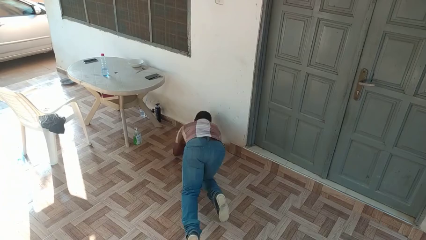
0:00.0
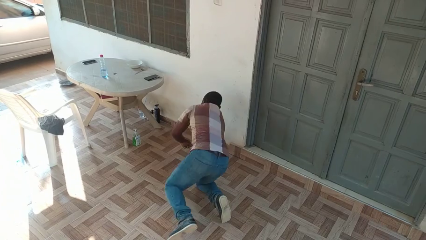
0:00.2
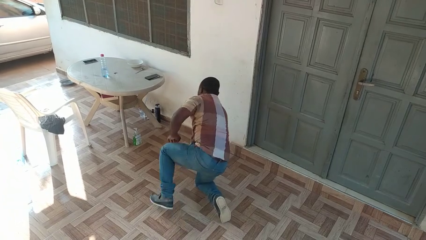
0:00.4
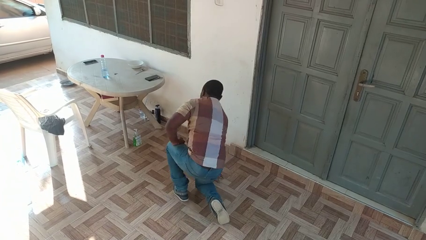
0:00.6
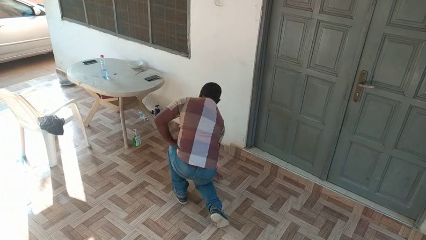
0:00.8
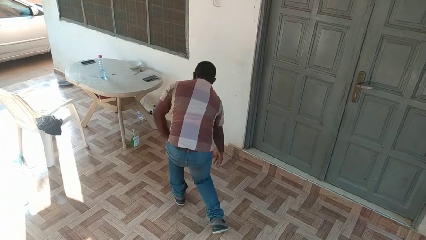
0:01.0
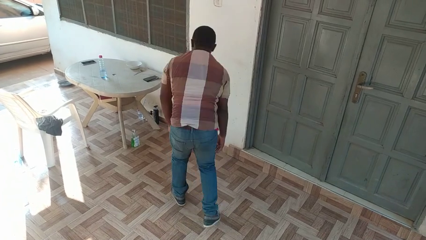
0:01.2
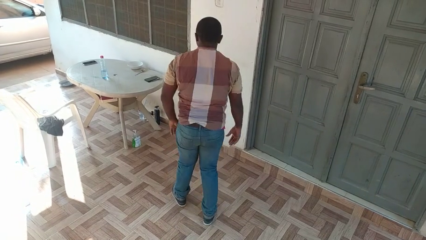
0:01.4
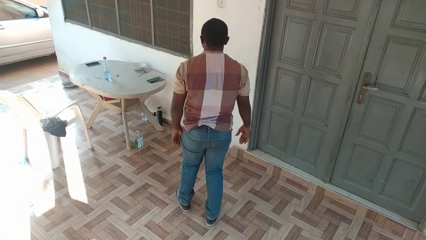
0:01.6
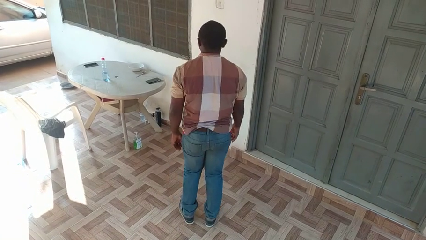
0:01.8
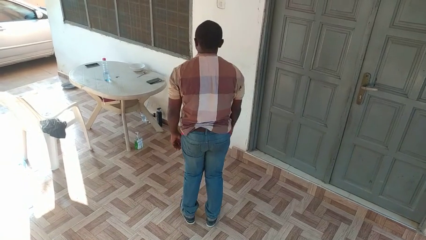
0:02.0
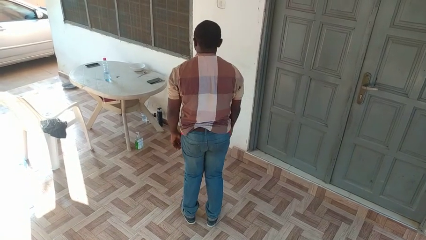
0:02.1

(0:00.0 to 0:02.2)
person stands up from floor

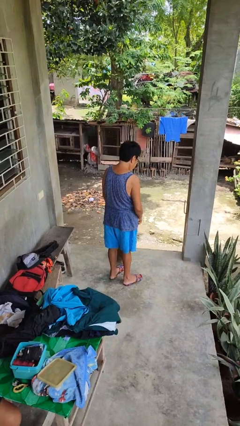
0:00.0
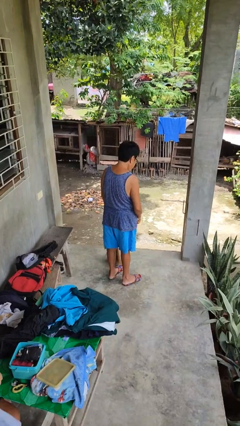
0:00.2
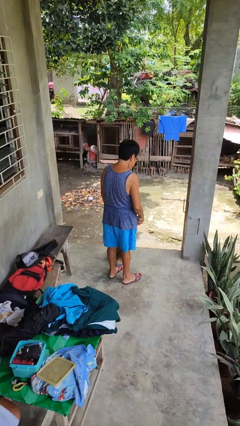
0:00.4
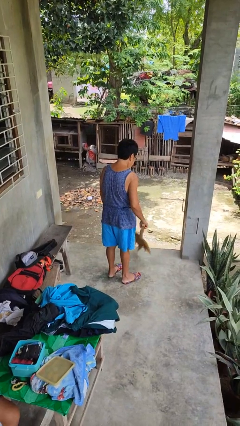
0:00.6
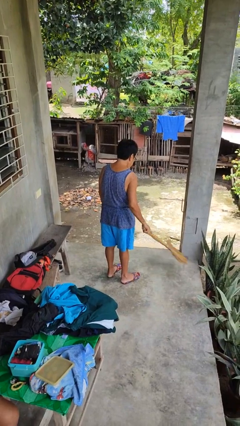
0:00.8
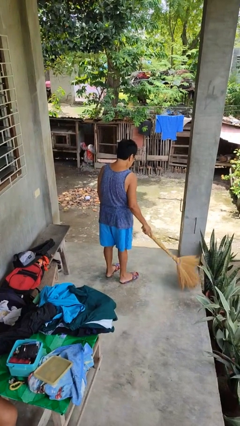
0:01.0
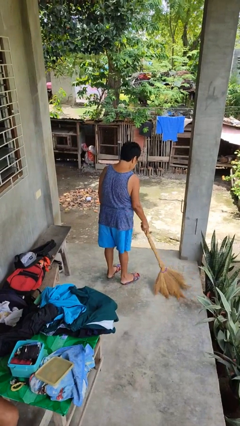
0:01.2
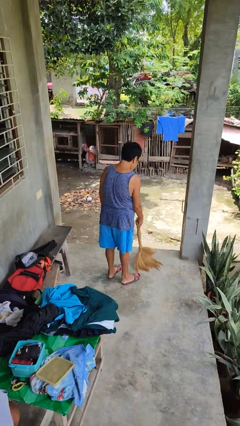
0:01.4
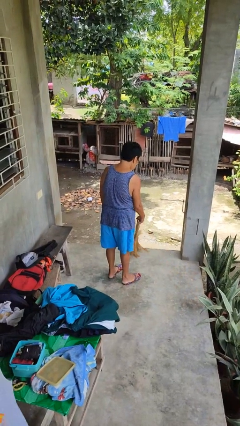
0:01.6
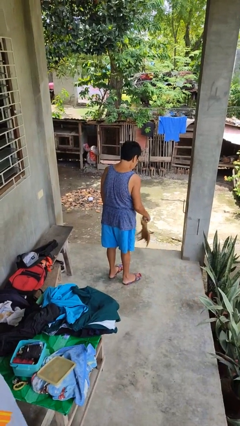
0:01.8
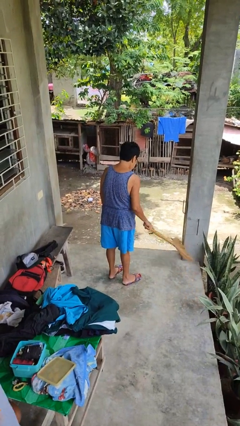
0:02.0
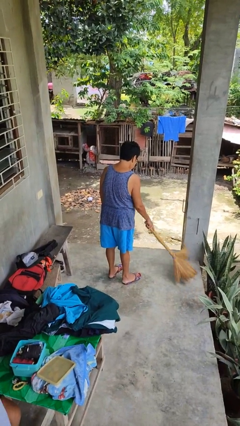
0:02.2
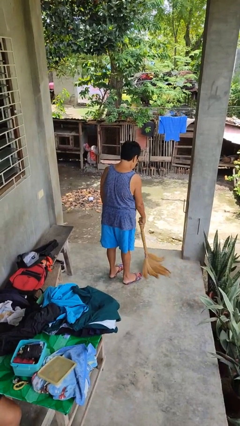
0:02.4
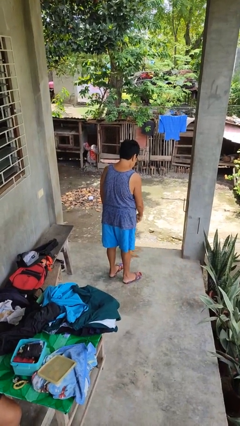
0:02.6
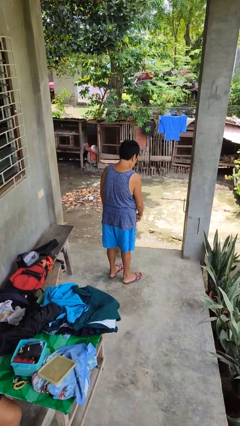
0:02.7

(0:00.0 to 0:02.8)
person sweeps floor

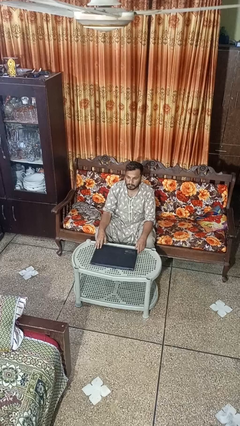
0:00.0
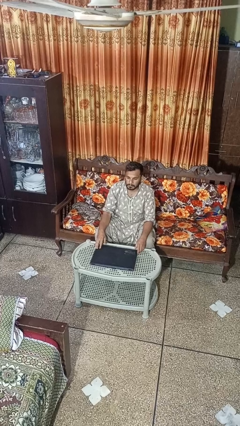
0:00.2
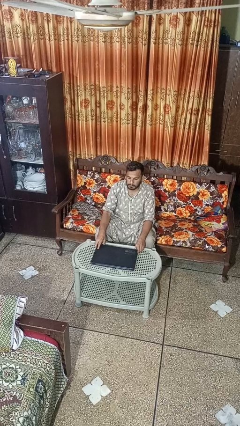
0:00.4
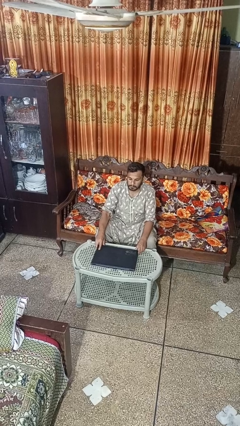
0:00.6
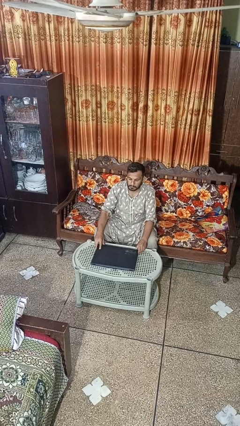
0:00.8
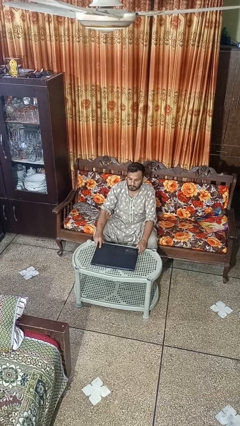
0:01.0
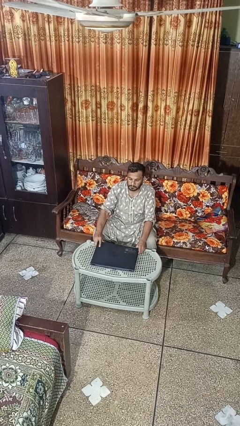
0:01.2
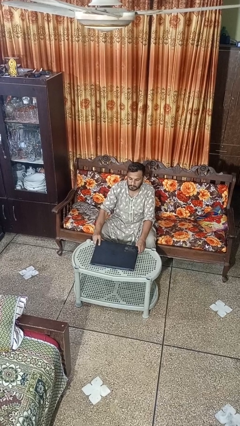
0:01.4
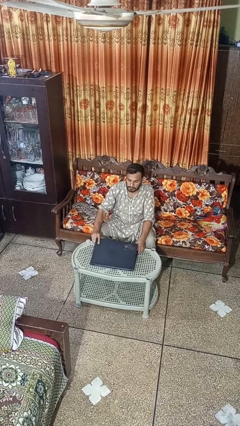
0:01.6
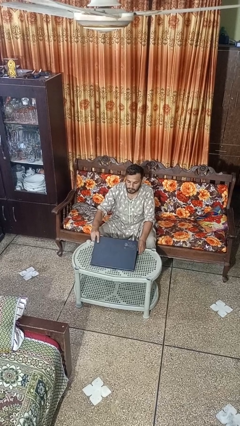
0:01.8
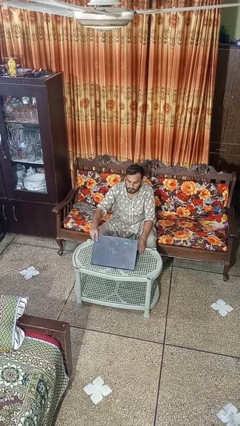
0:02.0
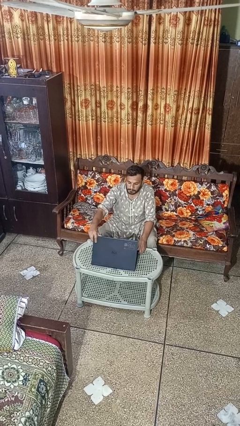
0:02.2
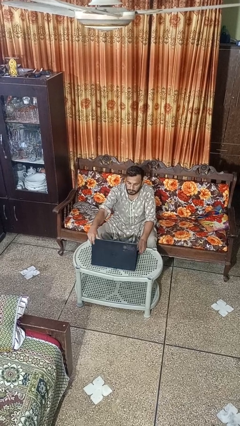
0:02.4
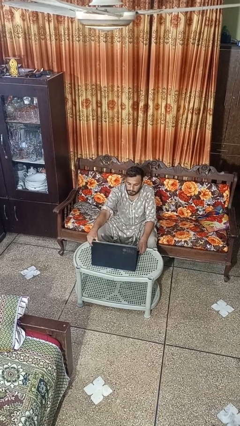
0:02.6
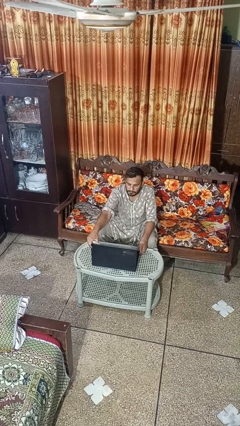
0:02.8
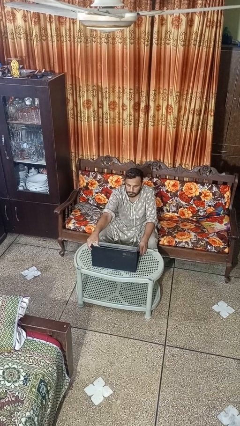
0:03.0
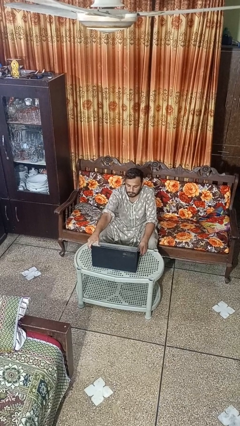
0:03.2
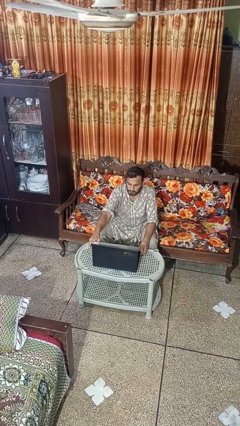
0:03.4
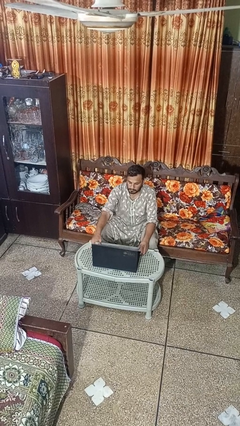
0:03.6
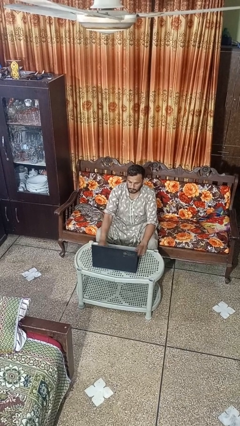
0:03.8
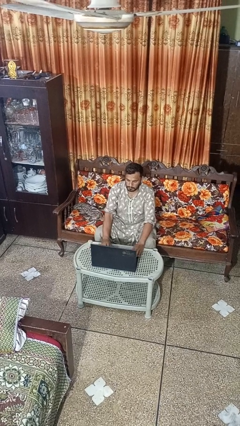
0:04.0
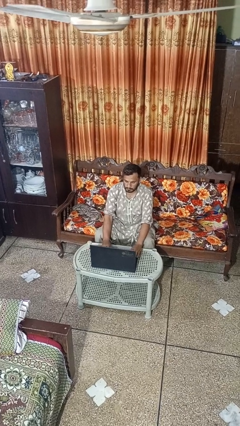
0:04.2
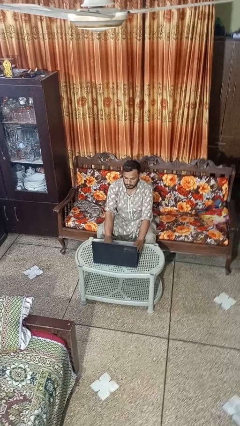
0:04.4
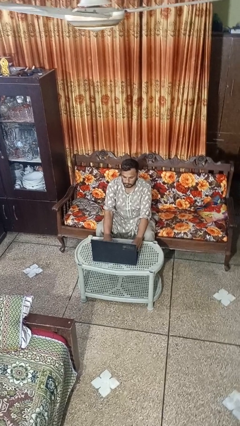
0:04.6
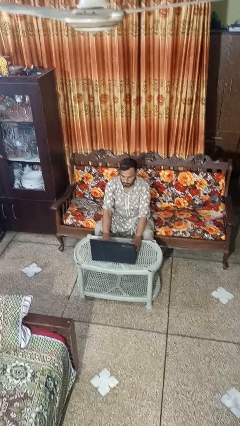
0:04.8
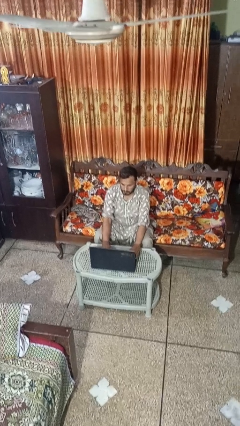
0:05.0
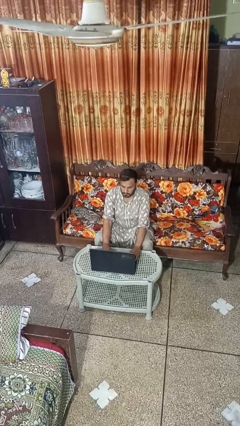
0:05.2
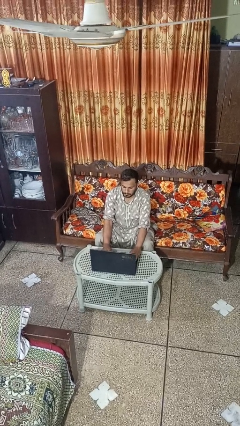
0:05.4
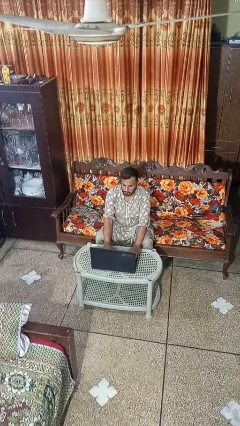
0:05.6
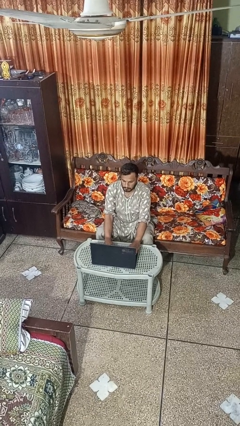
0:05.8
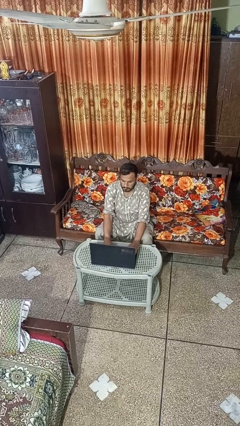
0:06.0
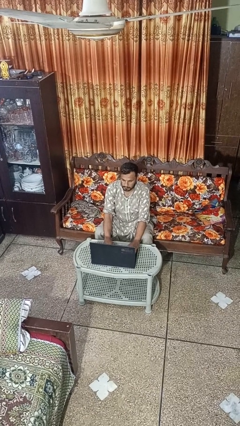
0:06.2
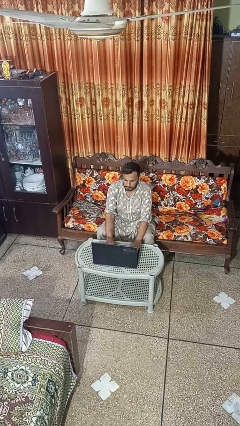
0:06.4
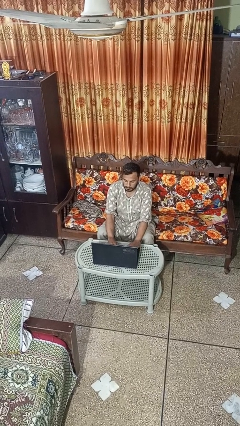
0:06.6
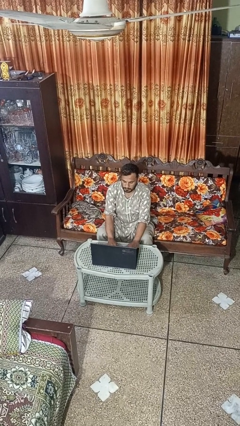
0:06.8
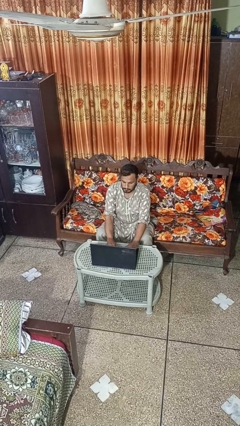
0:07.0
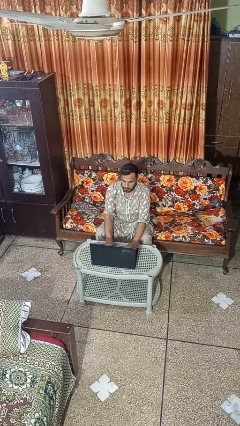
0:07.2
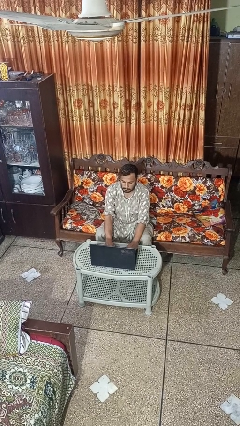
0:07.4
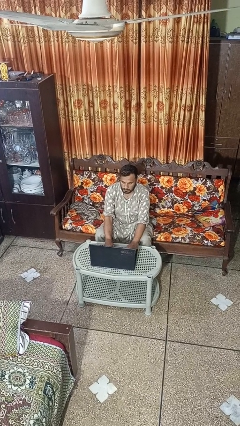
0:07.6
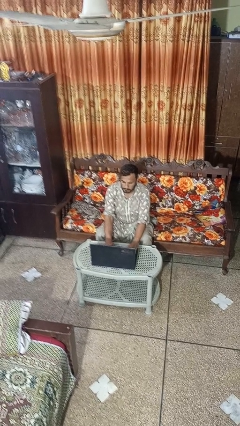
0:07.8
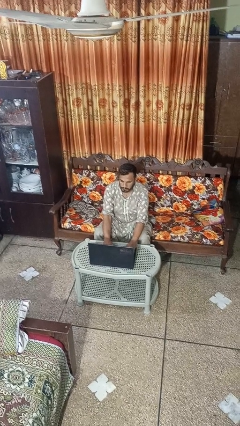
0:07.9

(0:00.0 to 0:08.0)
person opens laptop

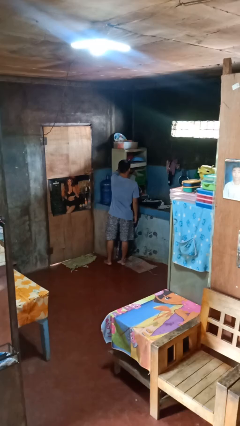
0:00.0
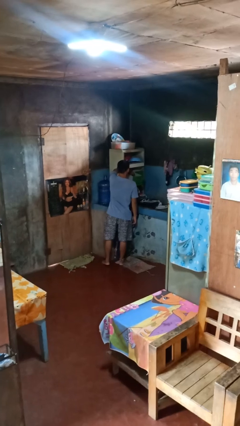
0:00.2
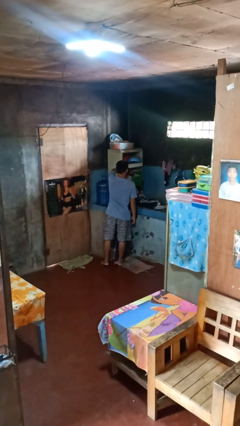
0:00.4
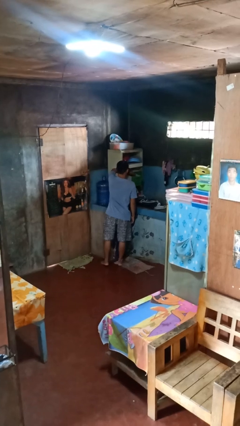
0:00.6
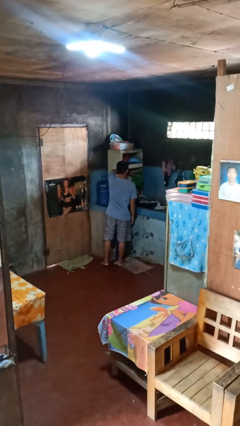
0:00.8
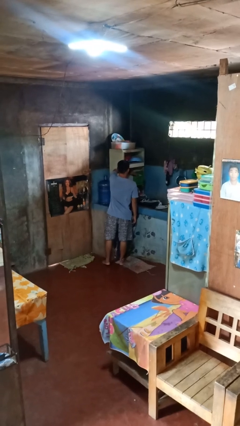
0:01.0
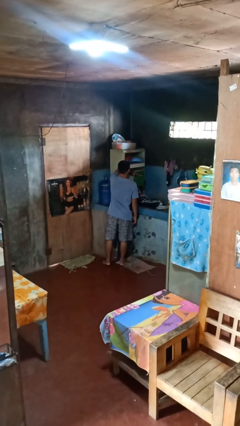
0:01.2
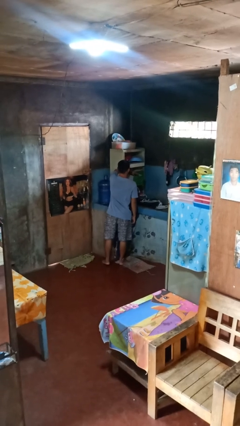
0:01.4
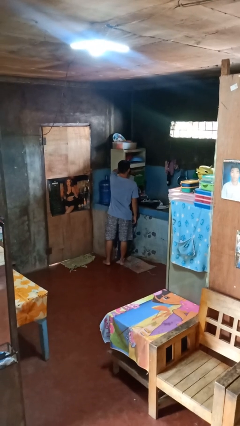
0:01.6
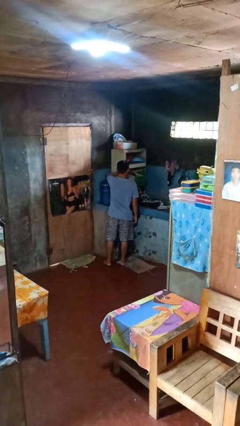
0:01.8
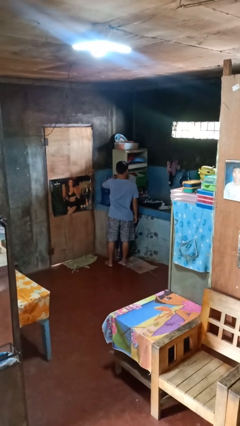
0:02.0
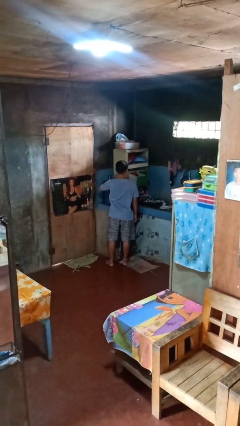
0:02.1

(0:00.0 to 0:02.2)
person searches in kitchen drawer

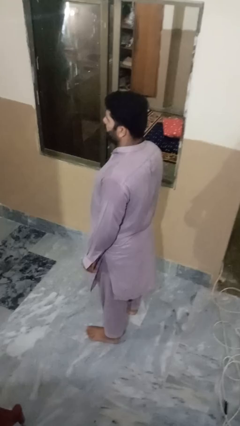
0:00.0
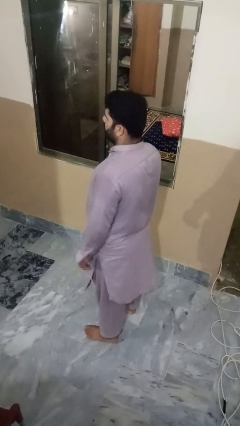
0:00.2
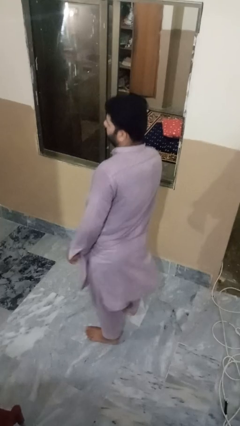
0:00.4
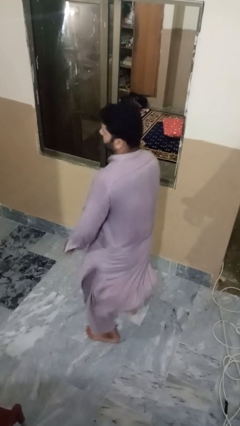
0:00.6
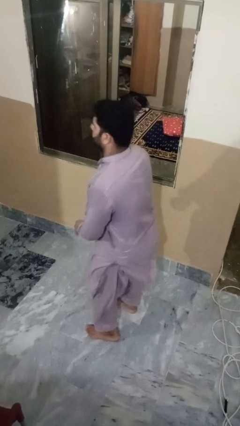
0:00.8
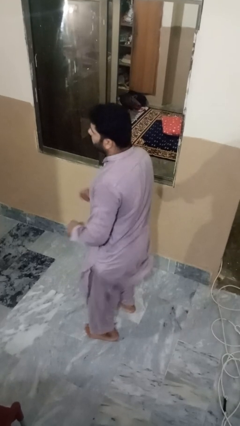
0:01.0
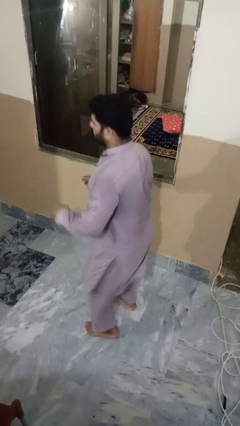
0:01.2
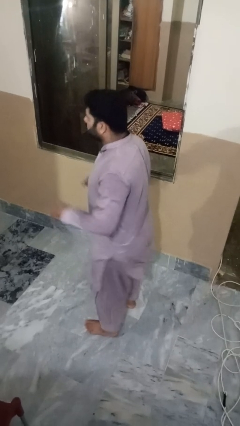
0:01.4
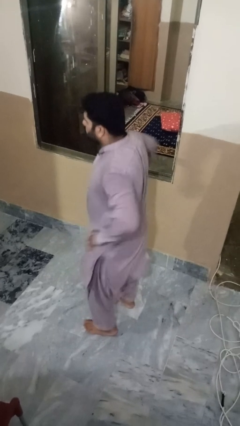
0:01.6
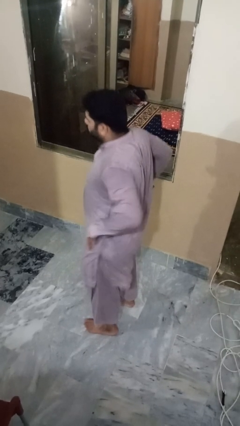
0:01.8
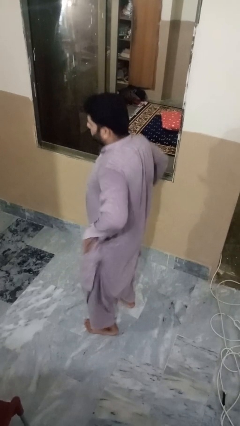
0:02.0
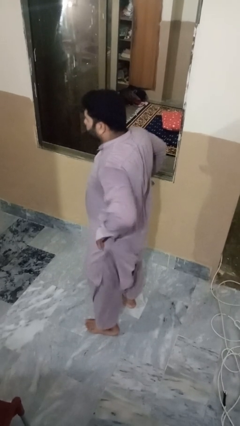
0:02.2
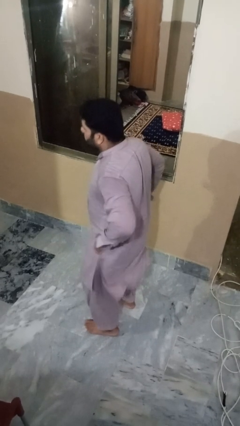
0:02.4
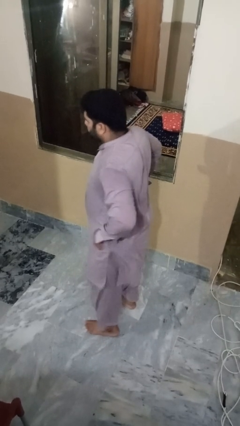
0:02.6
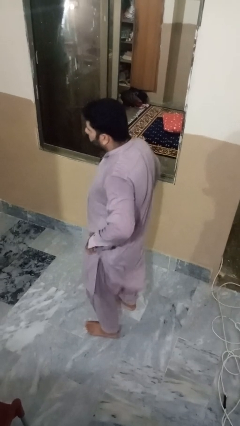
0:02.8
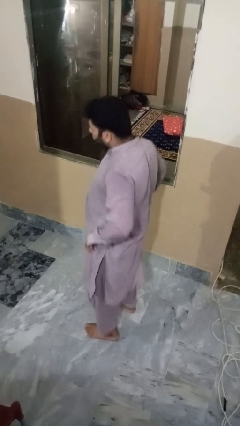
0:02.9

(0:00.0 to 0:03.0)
person dances in place
